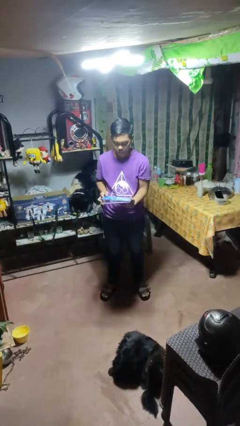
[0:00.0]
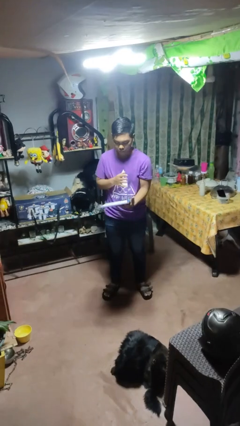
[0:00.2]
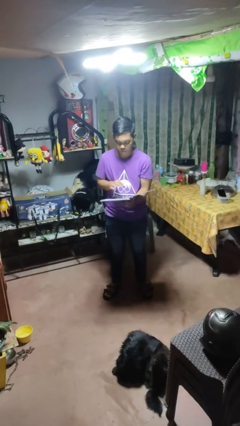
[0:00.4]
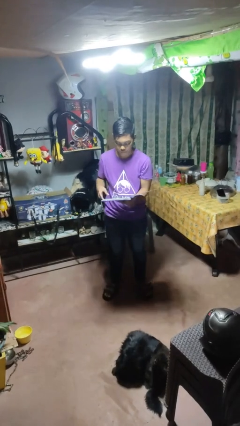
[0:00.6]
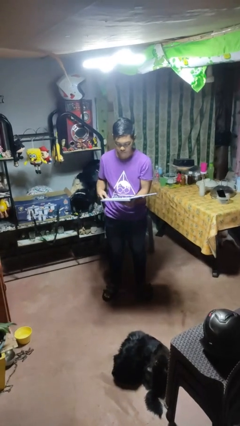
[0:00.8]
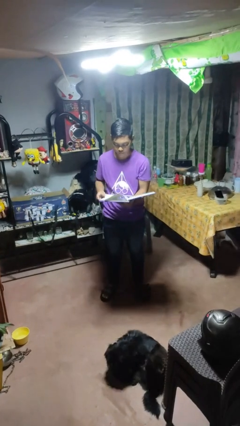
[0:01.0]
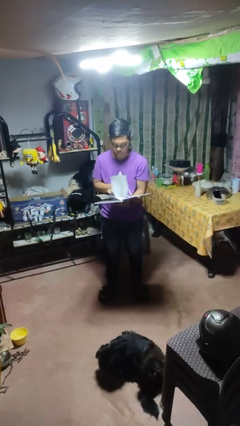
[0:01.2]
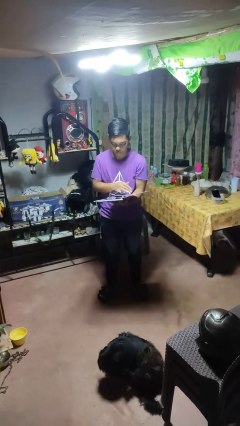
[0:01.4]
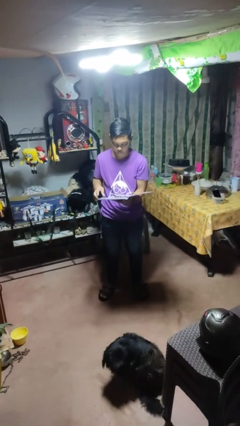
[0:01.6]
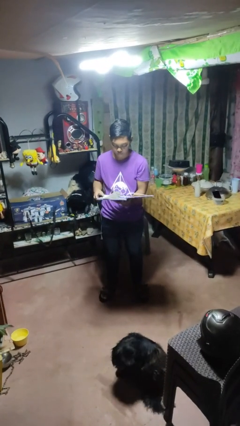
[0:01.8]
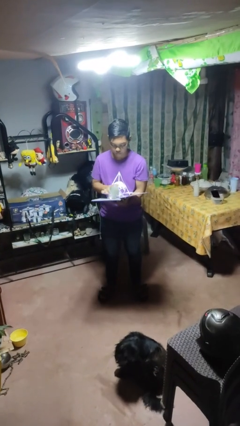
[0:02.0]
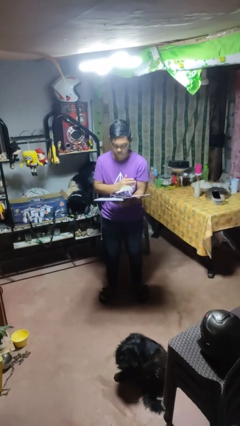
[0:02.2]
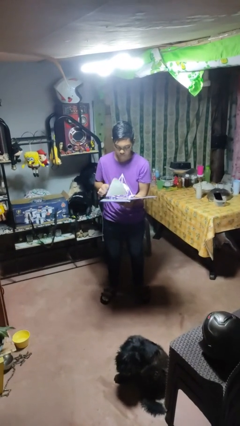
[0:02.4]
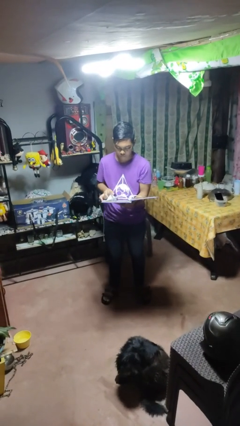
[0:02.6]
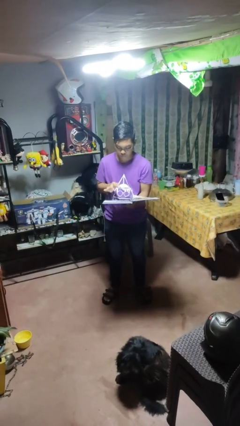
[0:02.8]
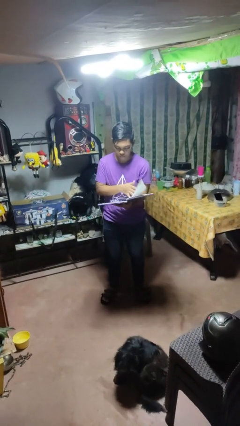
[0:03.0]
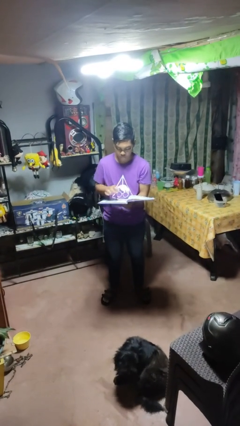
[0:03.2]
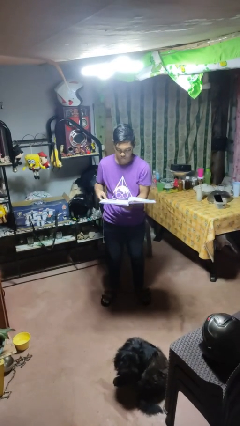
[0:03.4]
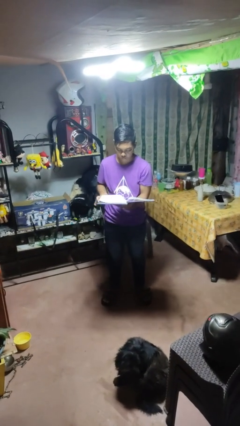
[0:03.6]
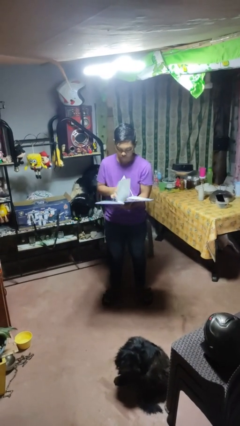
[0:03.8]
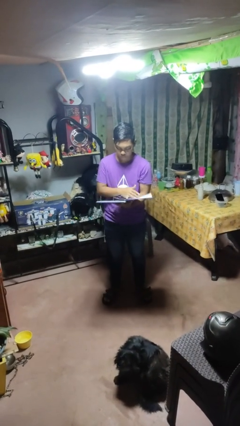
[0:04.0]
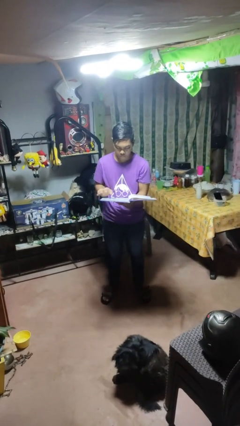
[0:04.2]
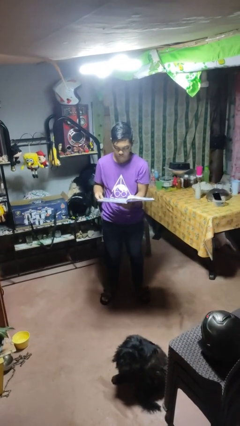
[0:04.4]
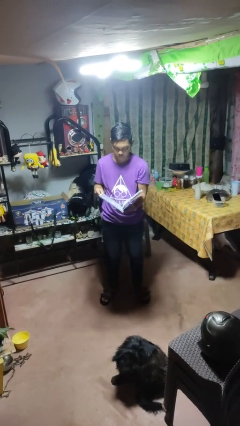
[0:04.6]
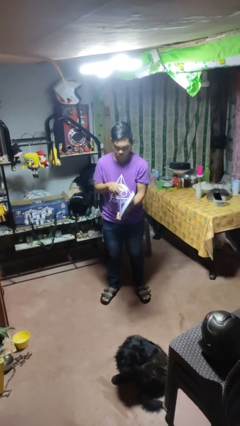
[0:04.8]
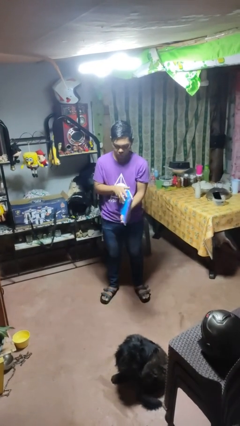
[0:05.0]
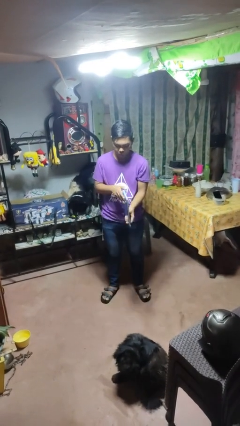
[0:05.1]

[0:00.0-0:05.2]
person reads magazine

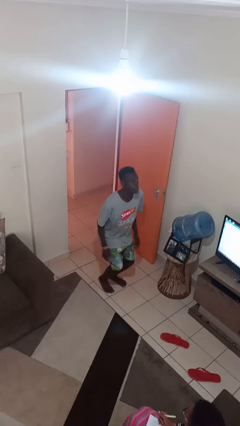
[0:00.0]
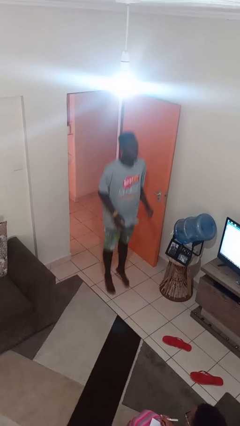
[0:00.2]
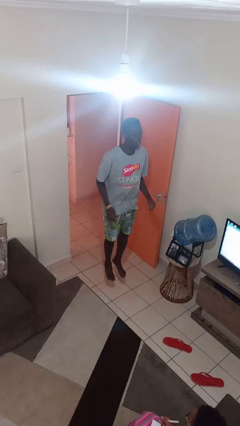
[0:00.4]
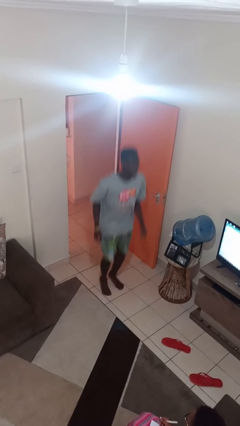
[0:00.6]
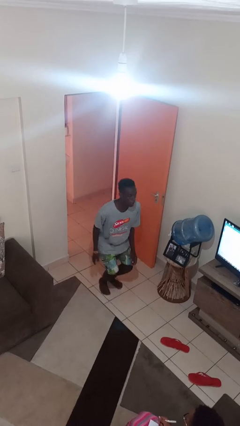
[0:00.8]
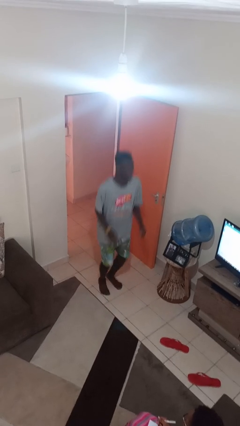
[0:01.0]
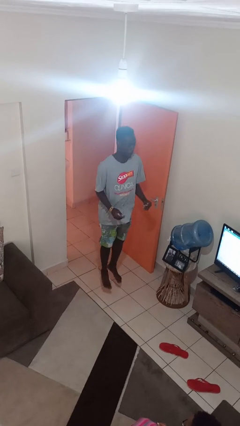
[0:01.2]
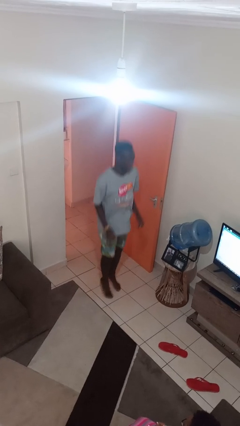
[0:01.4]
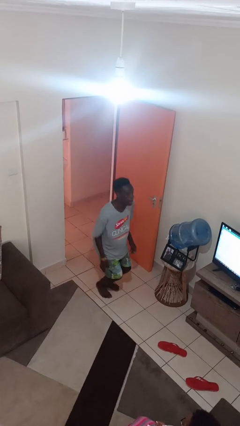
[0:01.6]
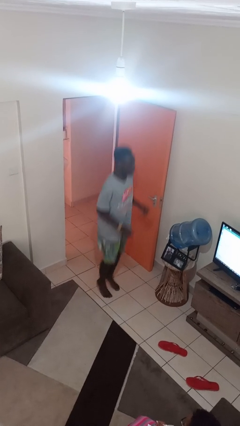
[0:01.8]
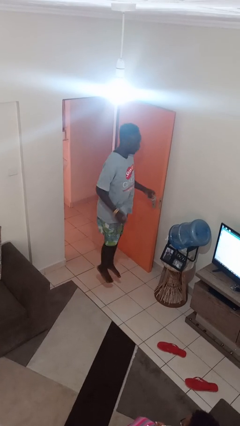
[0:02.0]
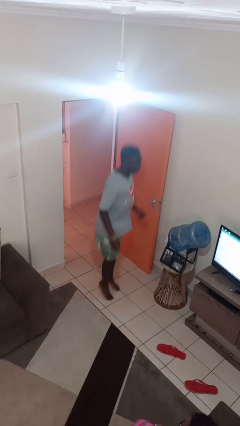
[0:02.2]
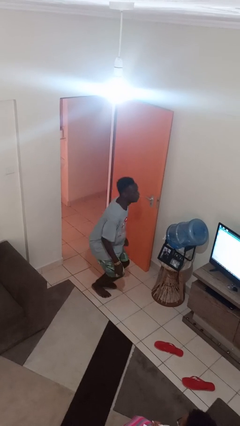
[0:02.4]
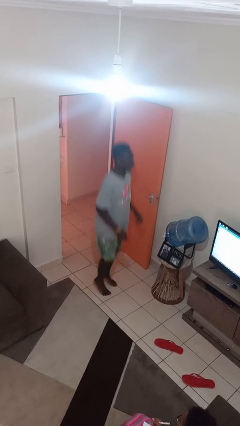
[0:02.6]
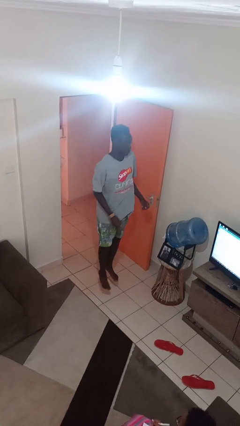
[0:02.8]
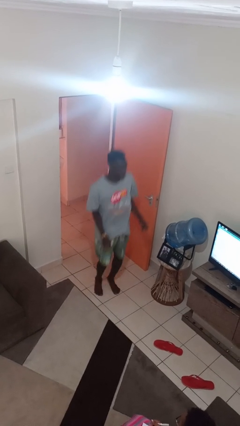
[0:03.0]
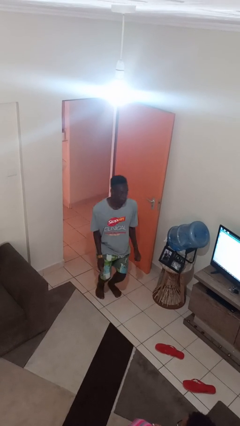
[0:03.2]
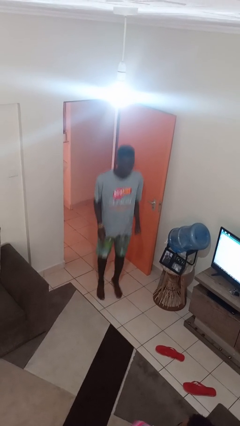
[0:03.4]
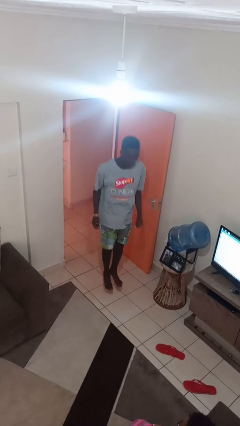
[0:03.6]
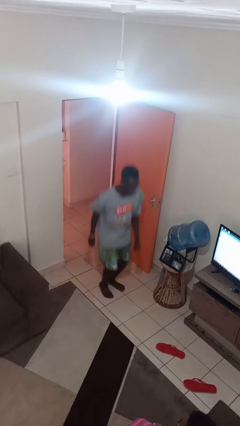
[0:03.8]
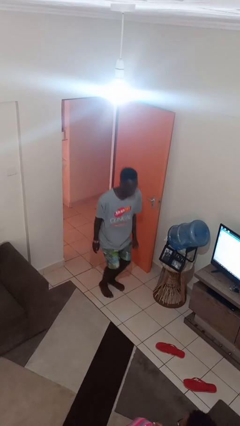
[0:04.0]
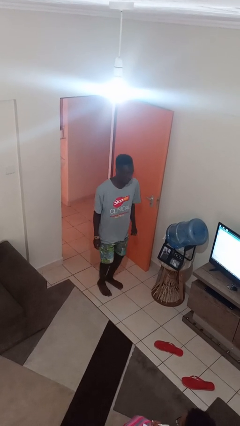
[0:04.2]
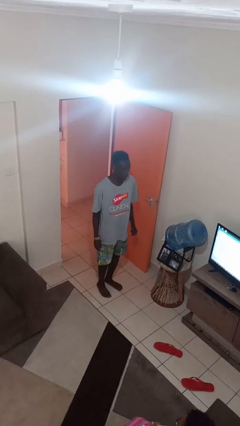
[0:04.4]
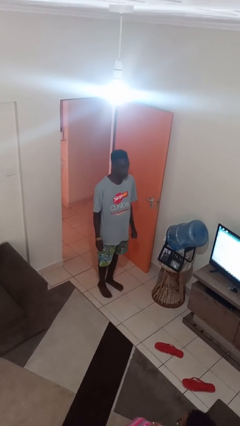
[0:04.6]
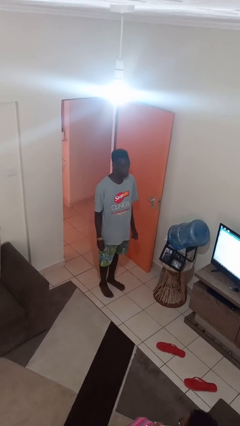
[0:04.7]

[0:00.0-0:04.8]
person jumps

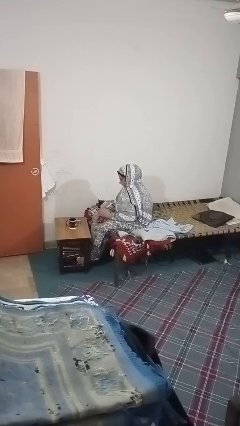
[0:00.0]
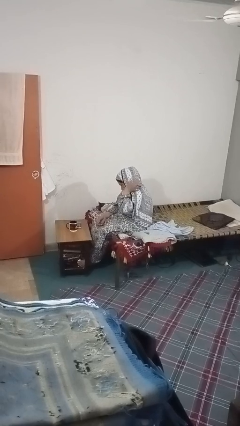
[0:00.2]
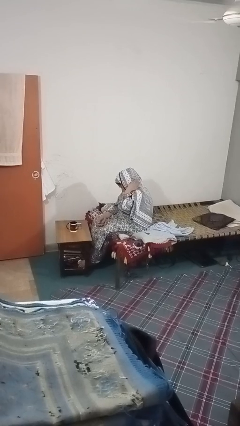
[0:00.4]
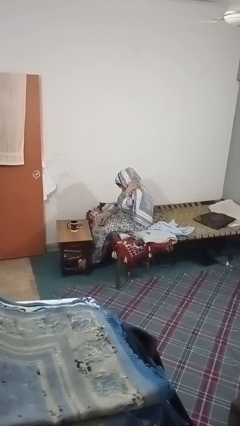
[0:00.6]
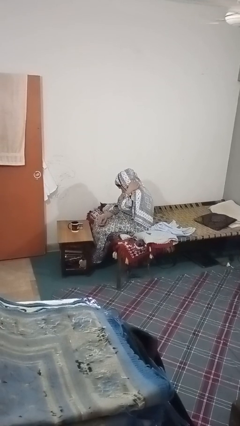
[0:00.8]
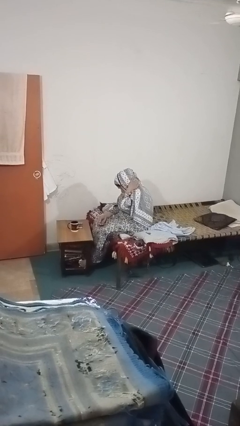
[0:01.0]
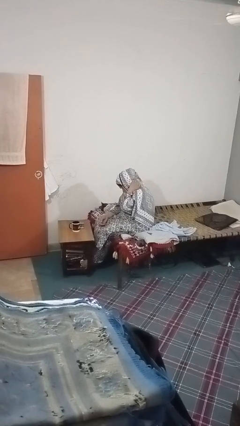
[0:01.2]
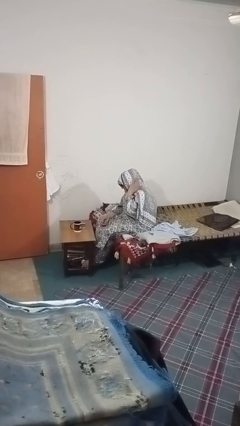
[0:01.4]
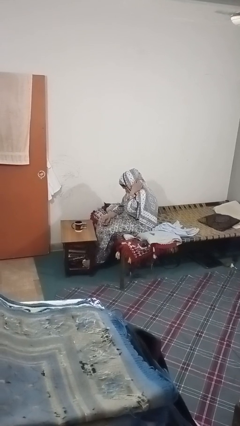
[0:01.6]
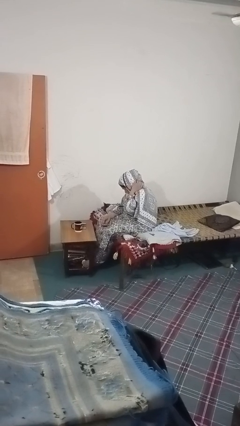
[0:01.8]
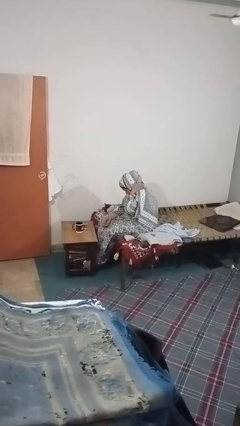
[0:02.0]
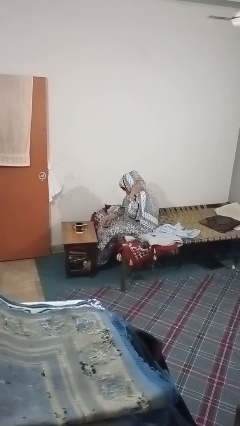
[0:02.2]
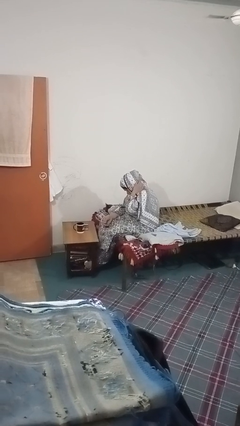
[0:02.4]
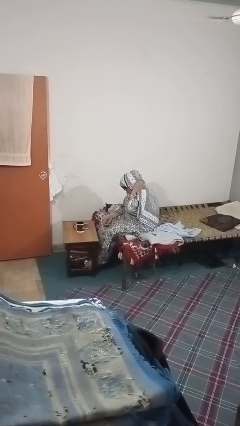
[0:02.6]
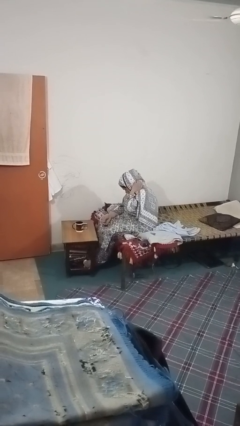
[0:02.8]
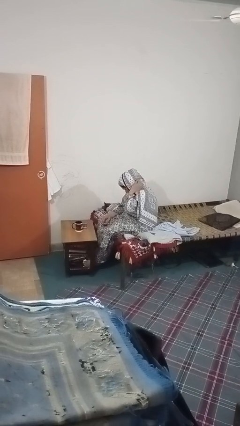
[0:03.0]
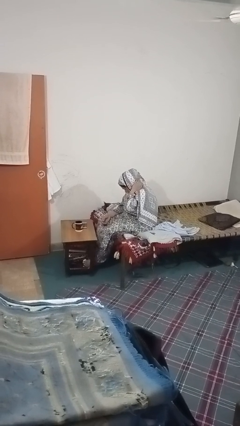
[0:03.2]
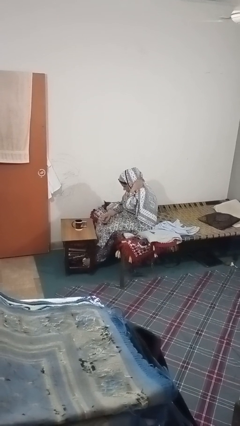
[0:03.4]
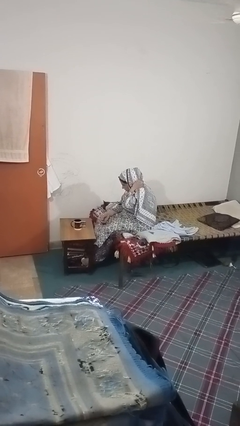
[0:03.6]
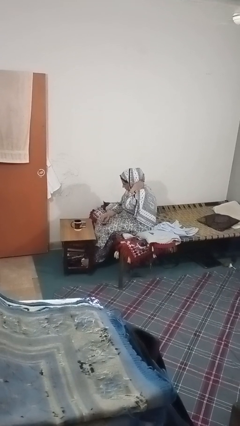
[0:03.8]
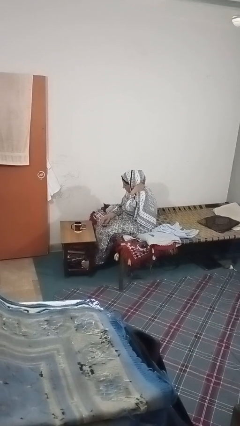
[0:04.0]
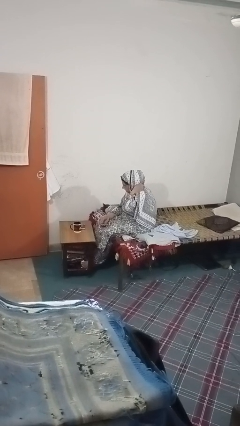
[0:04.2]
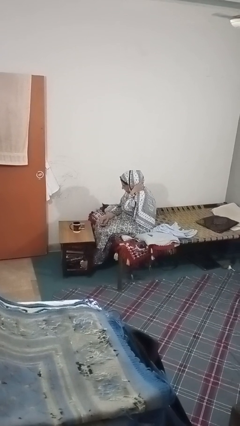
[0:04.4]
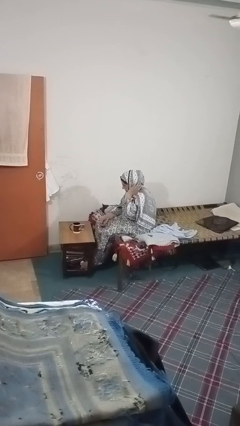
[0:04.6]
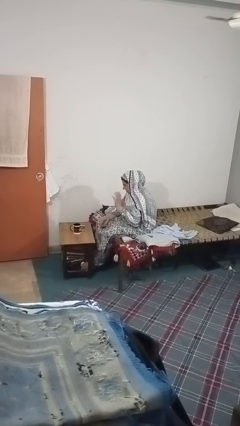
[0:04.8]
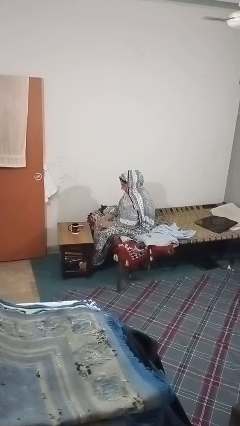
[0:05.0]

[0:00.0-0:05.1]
person rubs neck

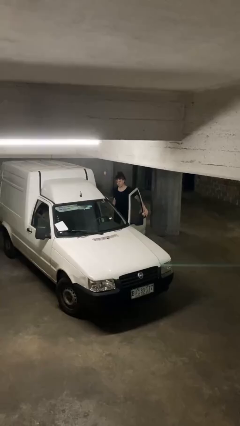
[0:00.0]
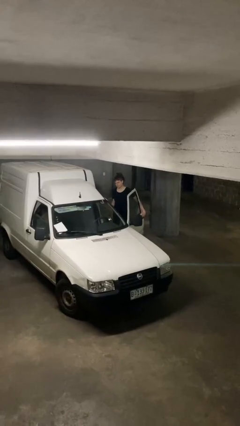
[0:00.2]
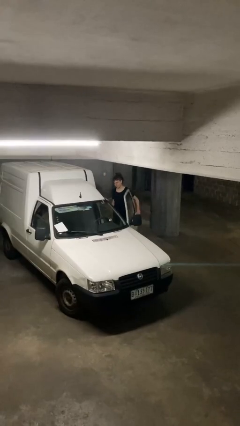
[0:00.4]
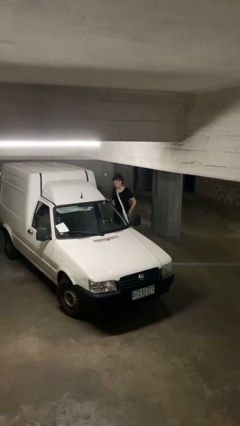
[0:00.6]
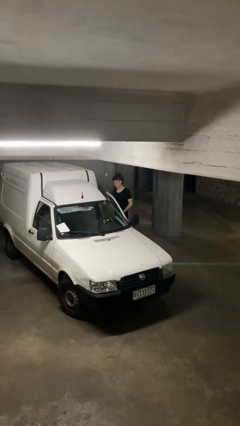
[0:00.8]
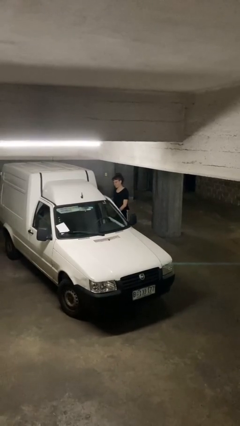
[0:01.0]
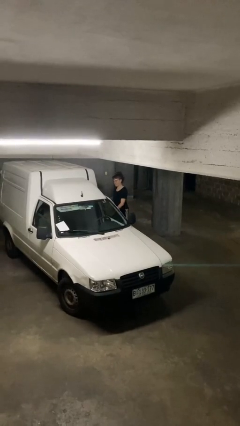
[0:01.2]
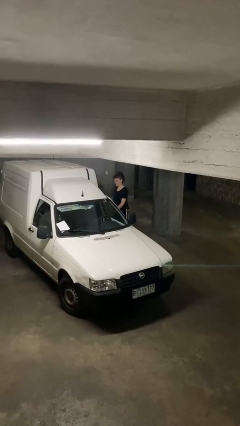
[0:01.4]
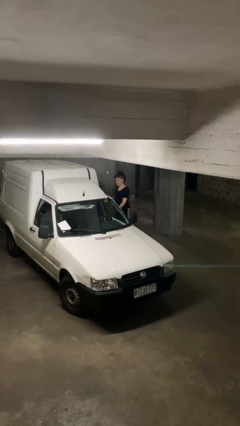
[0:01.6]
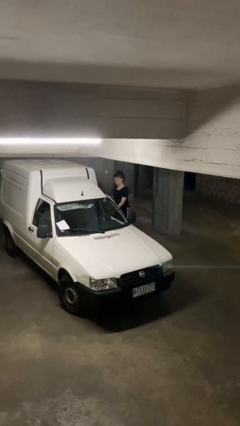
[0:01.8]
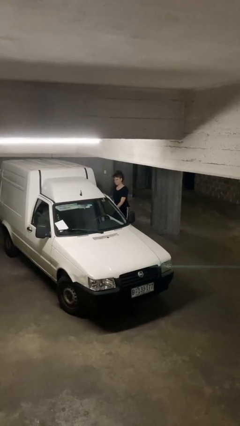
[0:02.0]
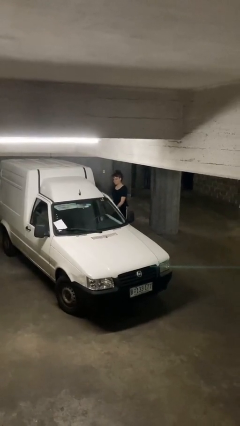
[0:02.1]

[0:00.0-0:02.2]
person closes car door

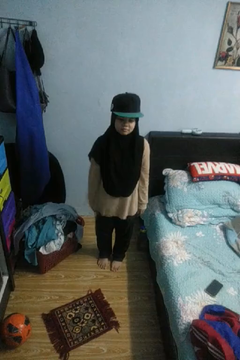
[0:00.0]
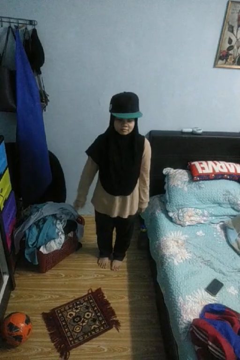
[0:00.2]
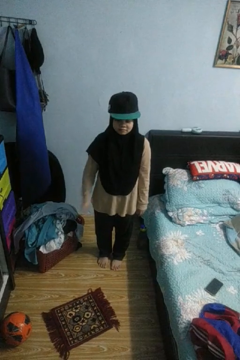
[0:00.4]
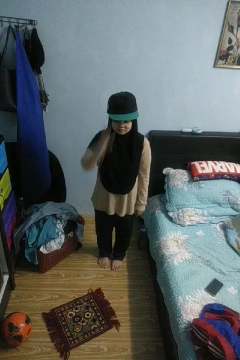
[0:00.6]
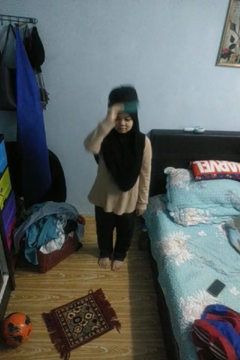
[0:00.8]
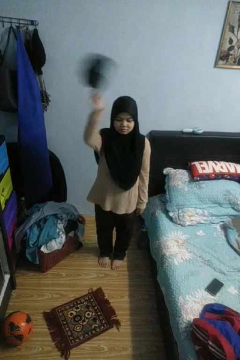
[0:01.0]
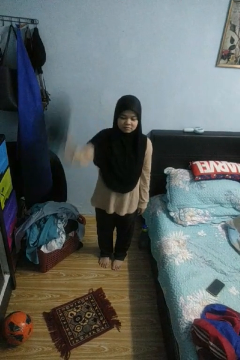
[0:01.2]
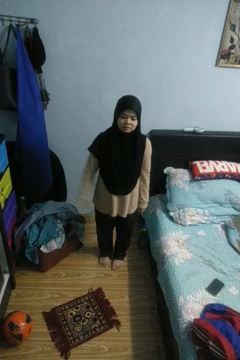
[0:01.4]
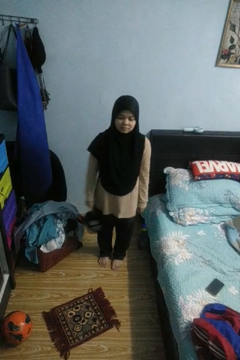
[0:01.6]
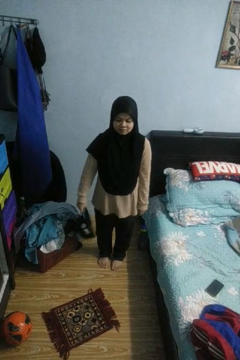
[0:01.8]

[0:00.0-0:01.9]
person takes off hat
